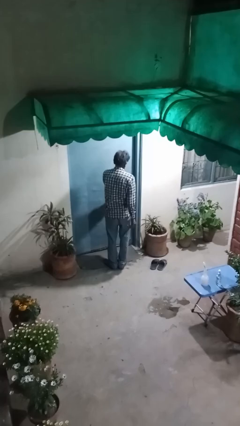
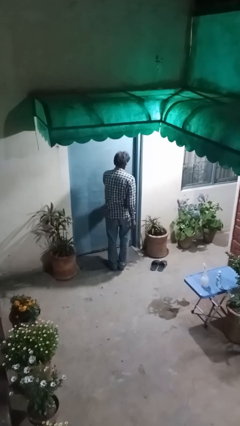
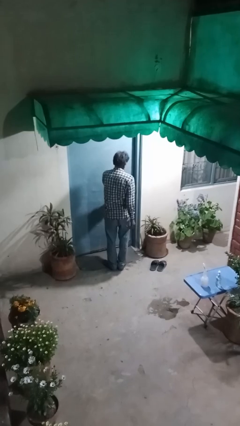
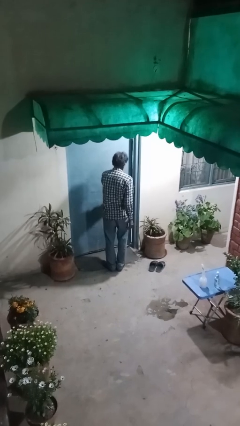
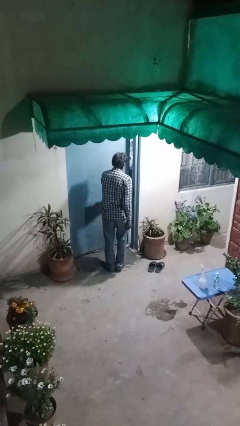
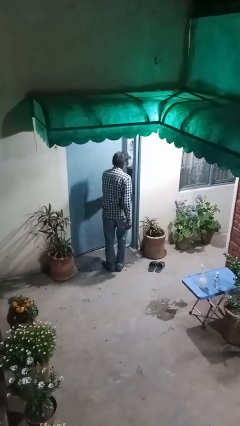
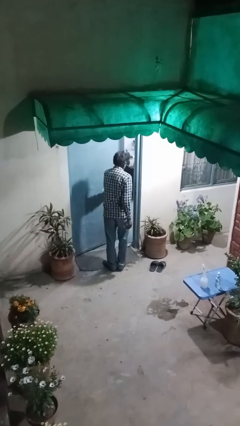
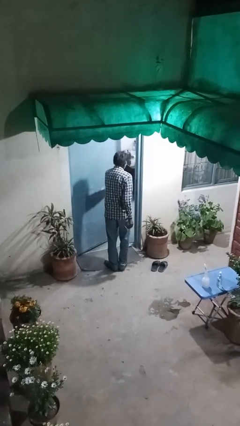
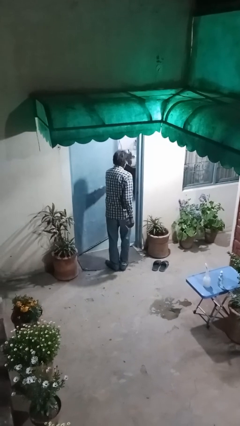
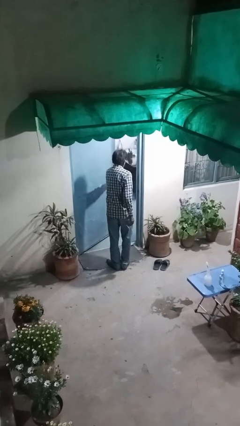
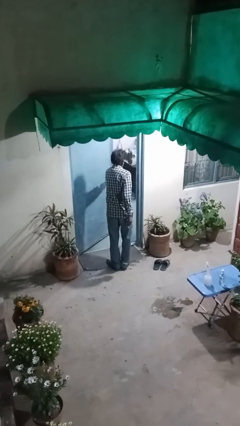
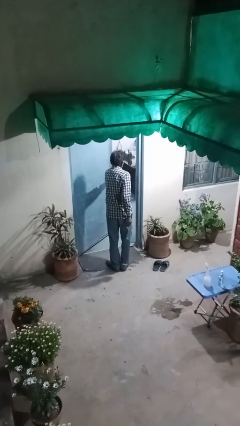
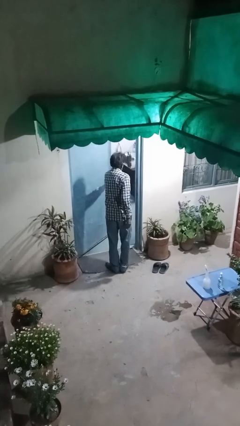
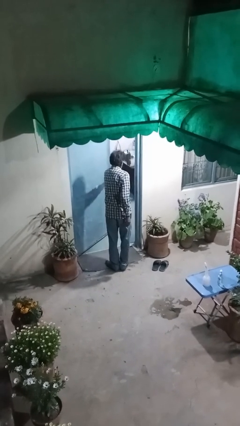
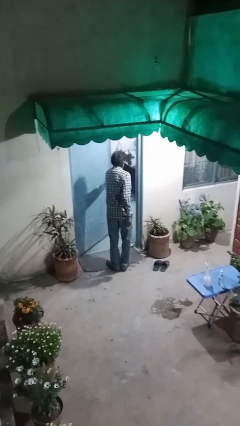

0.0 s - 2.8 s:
person opens facility door

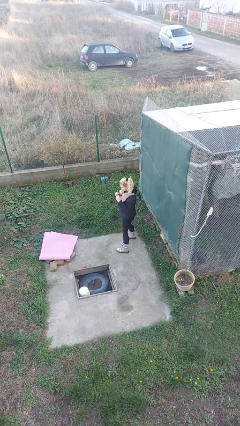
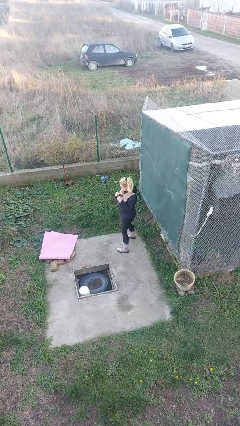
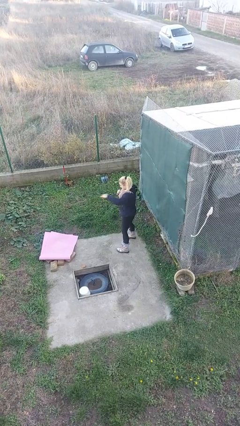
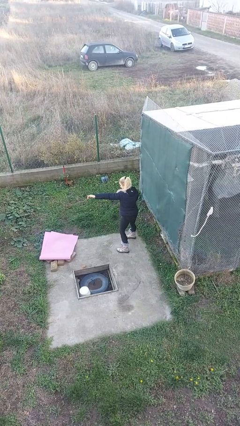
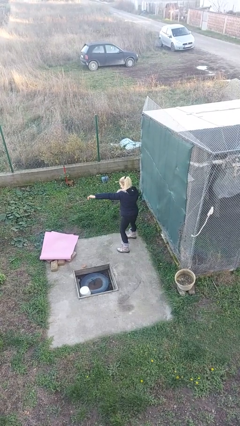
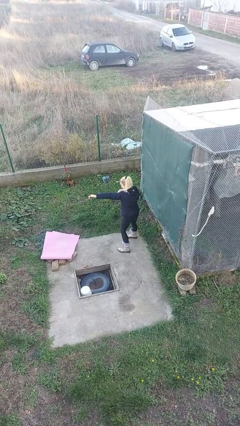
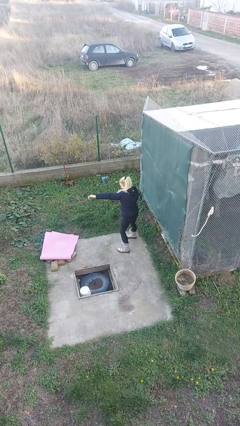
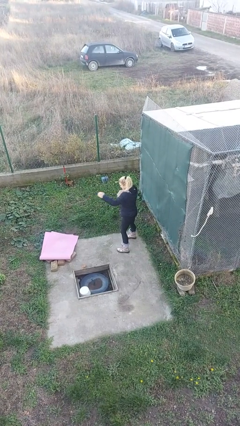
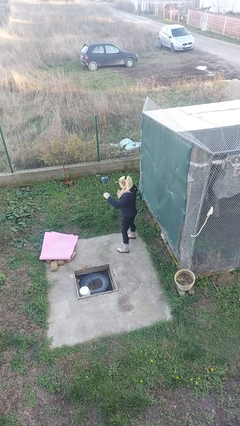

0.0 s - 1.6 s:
person punches

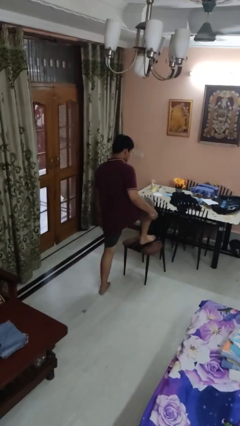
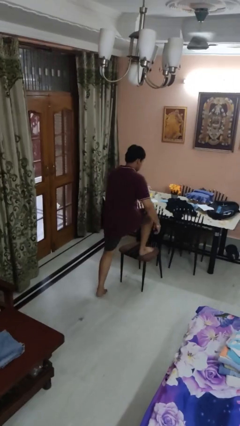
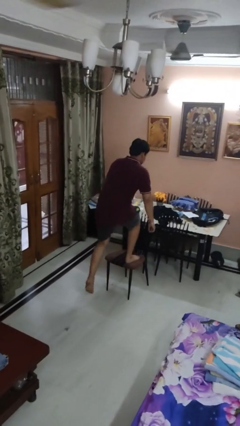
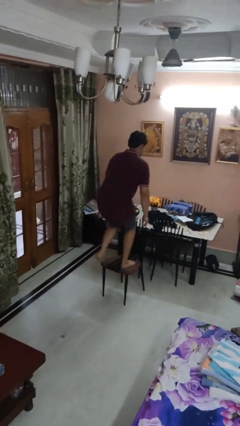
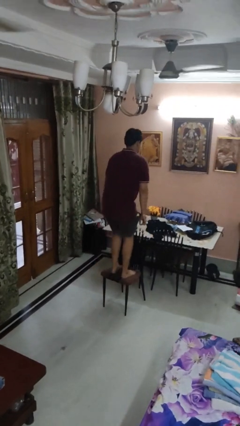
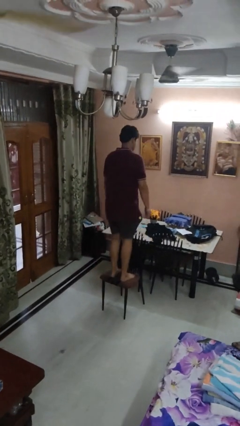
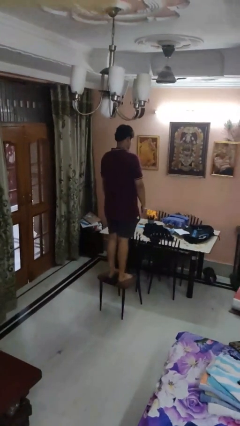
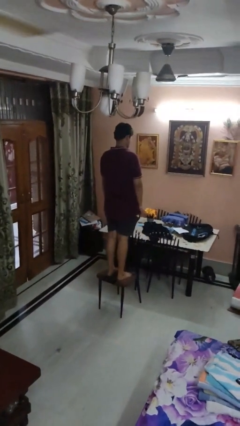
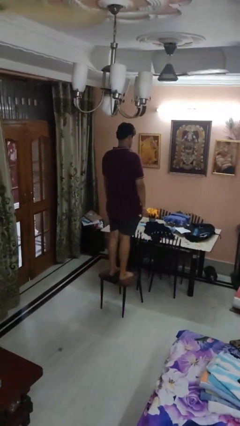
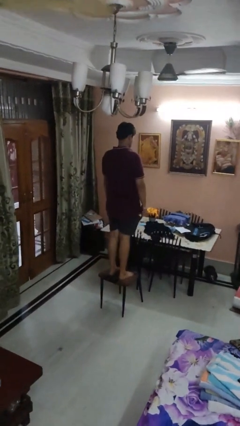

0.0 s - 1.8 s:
person climbs on chair

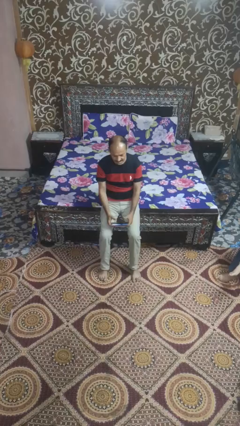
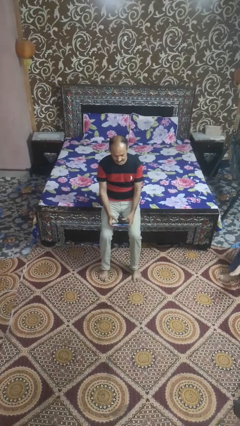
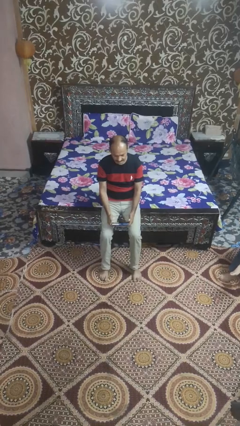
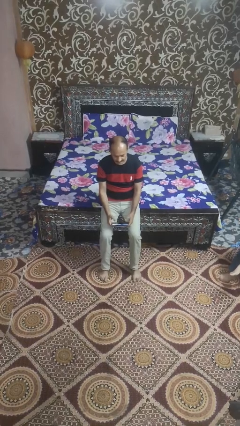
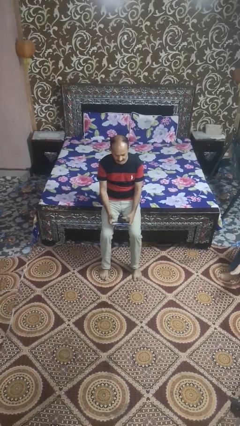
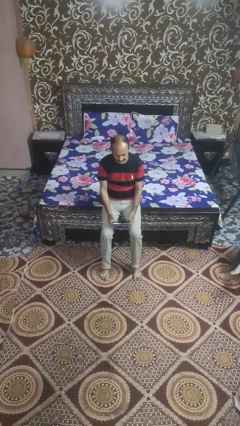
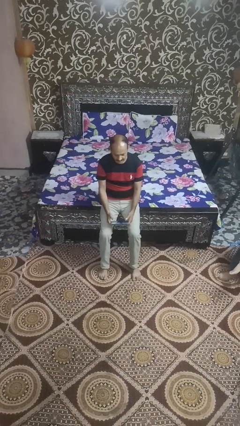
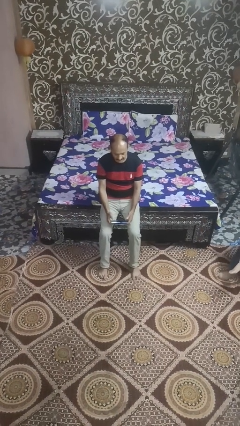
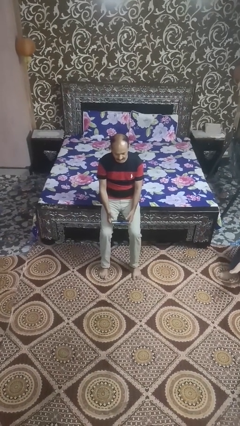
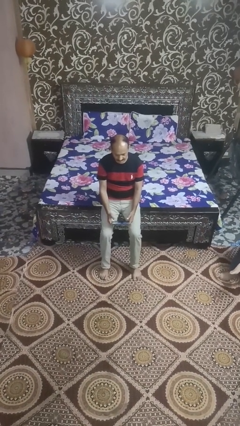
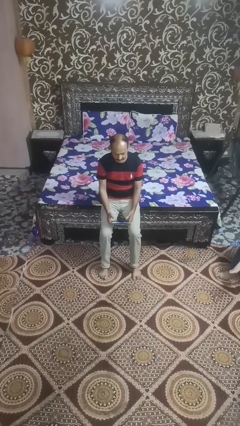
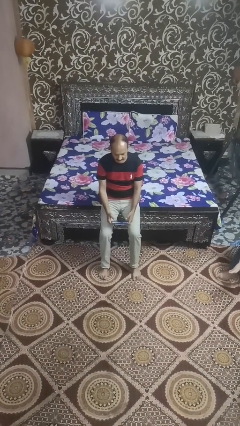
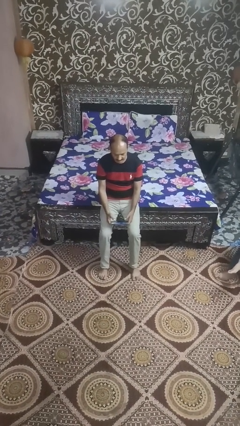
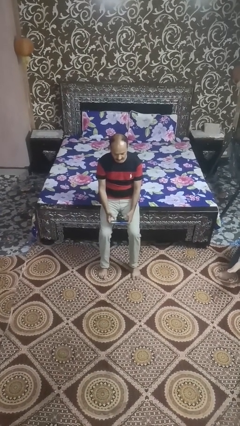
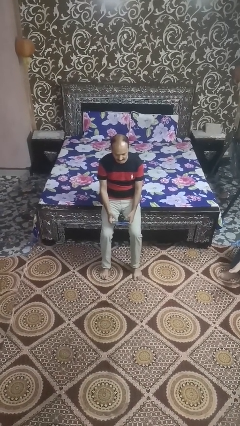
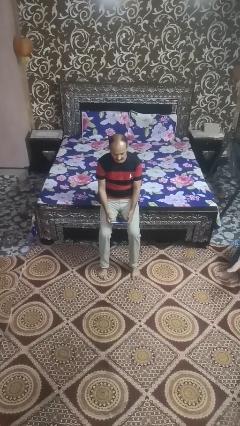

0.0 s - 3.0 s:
person interacts with handheld game

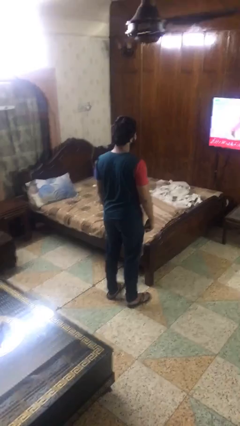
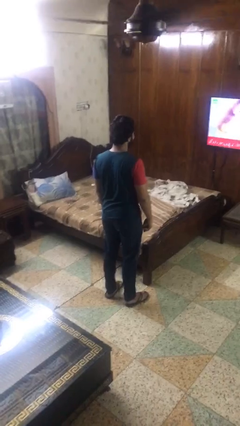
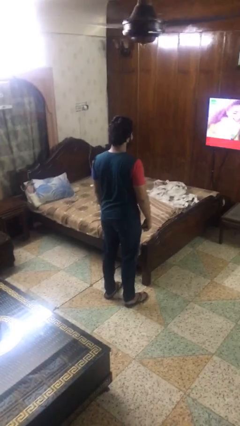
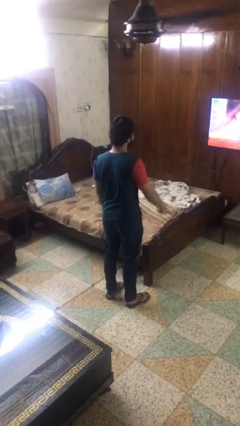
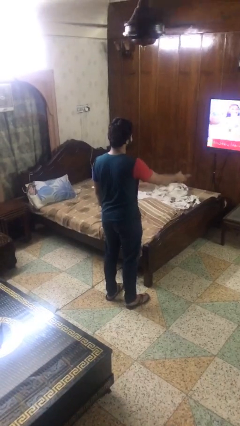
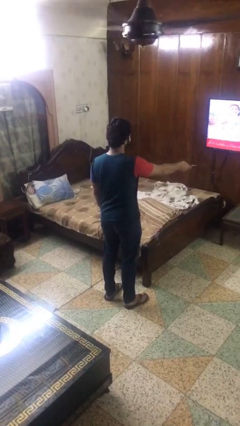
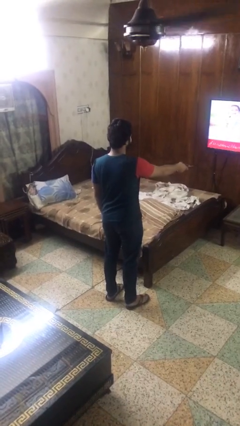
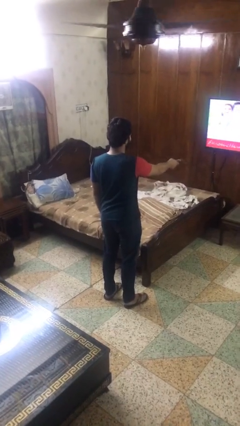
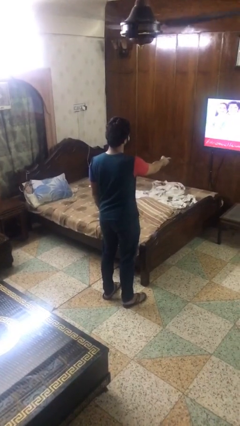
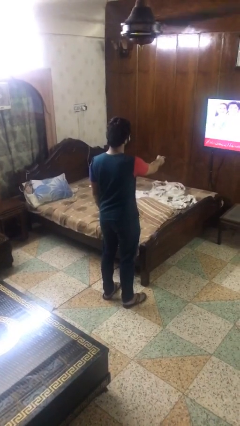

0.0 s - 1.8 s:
person uses television remote

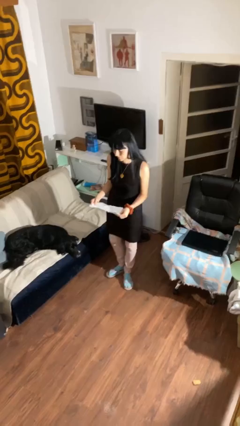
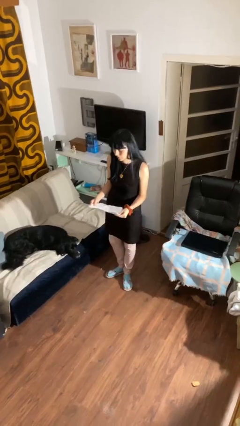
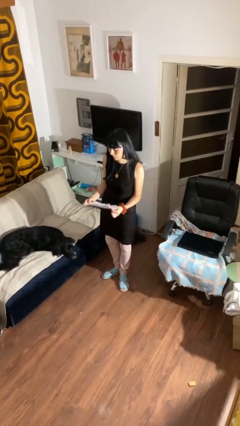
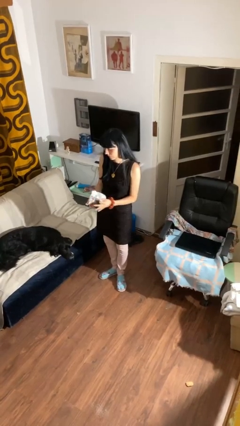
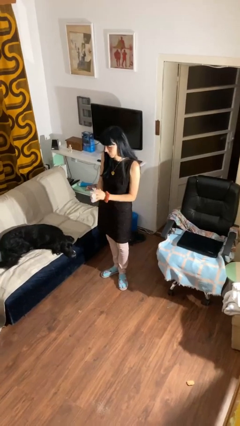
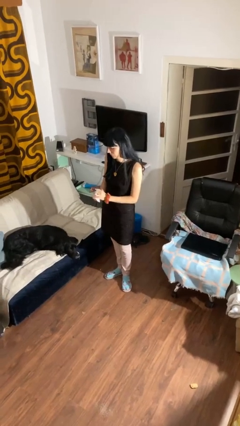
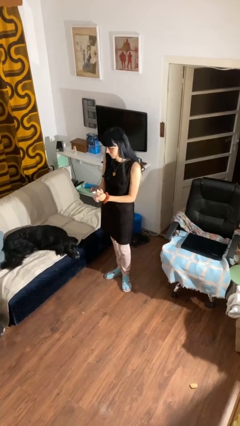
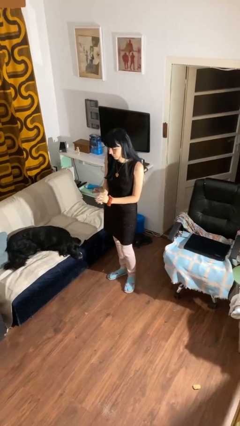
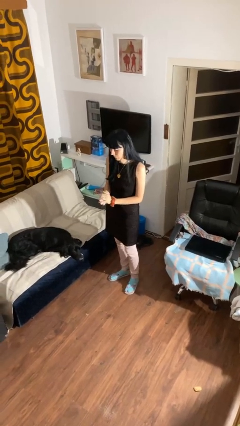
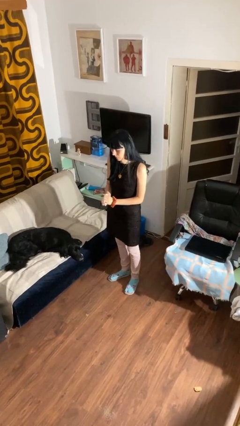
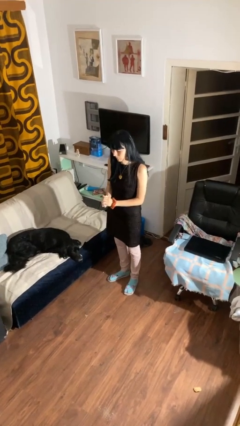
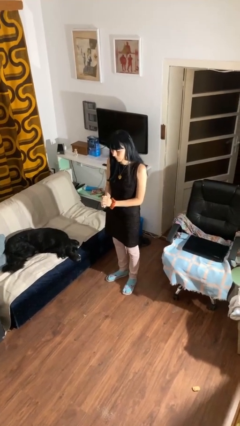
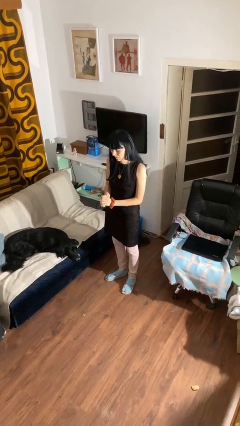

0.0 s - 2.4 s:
person crumples paper

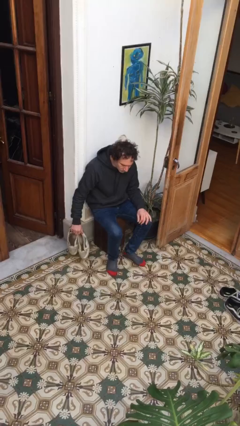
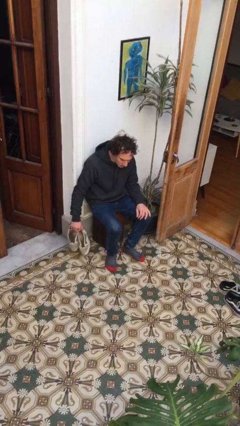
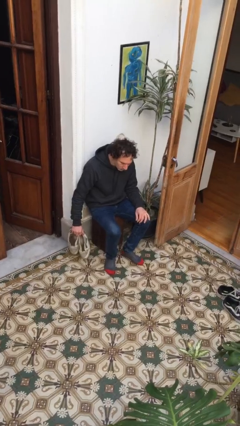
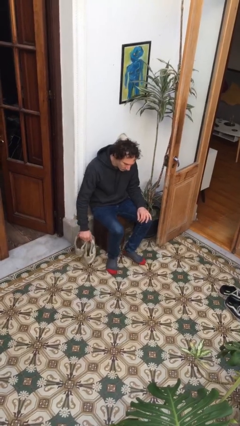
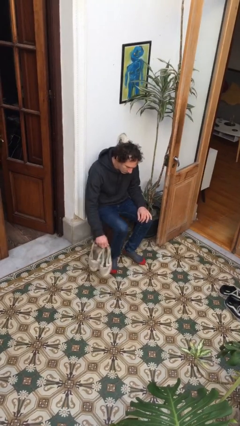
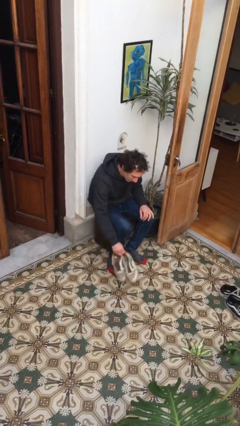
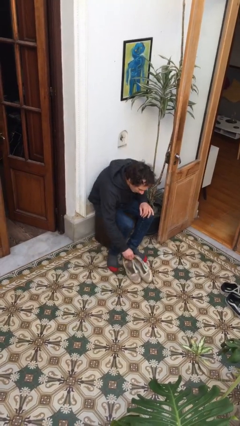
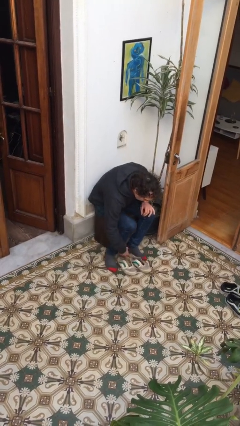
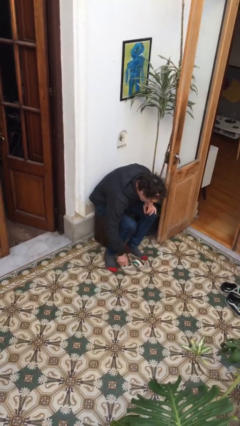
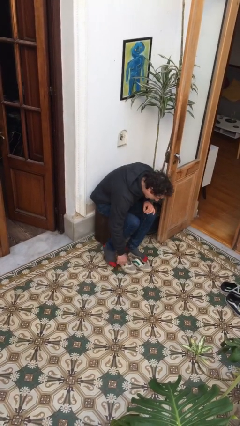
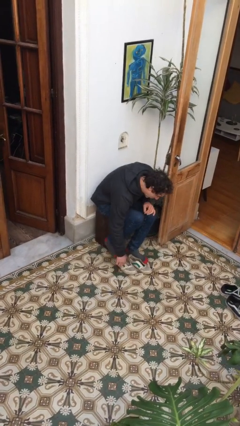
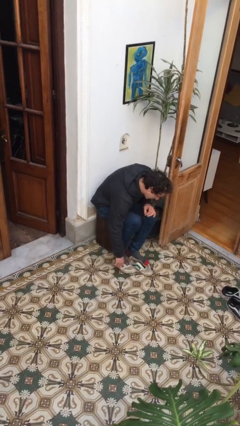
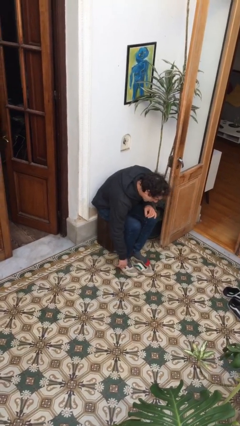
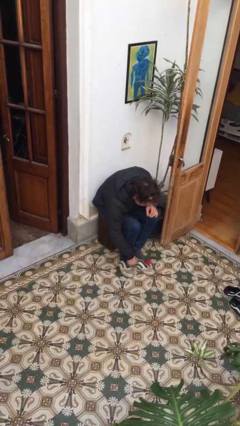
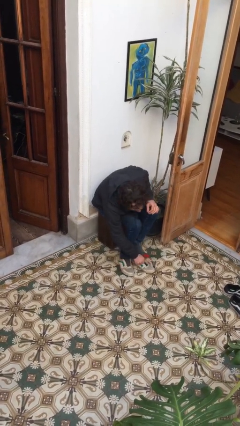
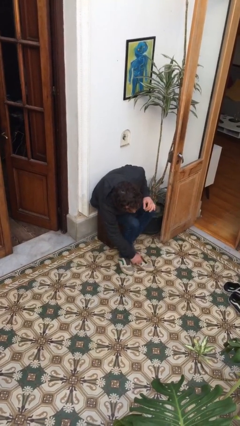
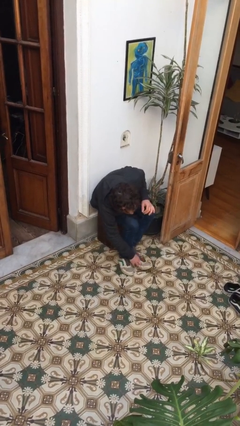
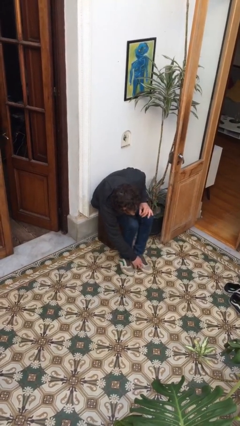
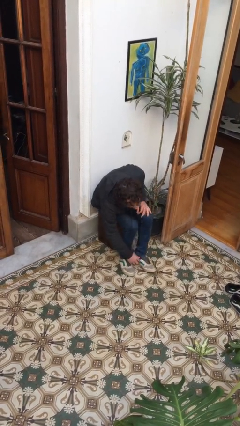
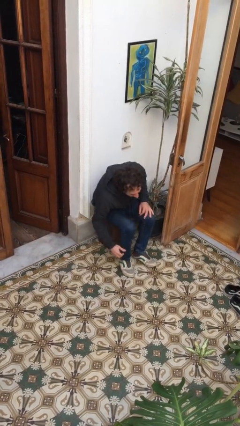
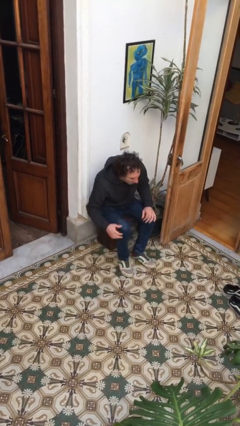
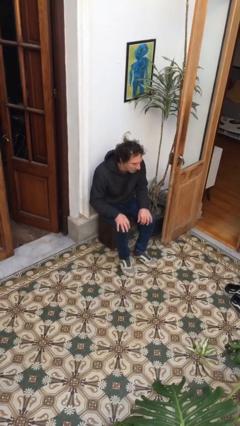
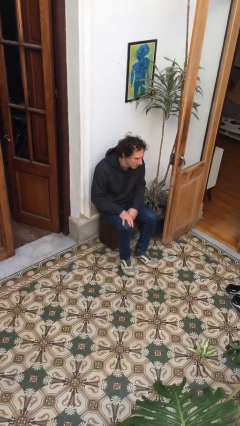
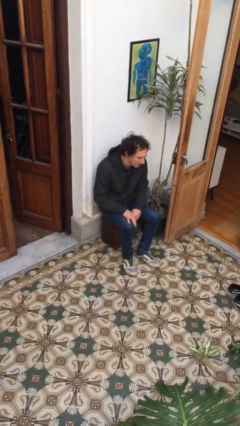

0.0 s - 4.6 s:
person puts on shoes
